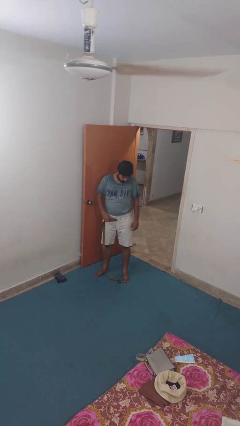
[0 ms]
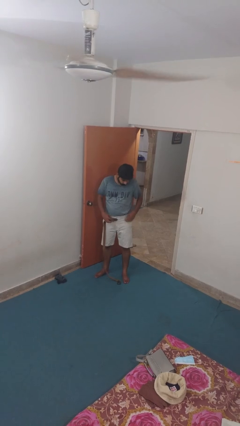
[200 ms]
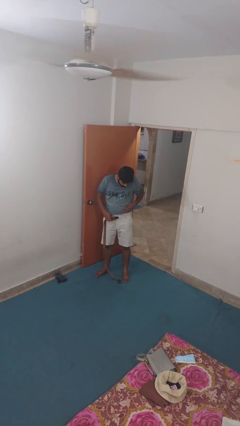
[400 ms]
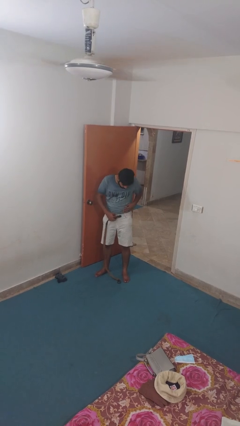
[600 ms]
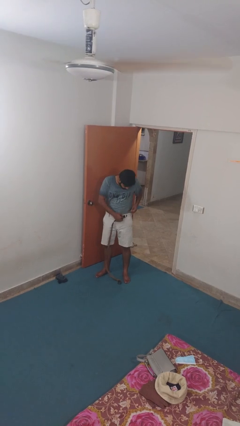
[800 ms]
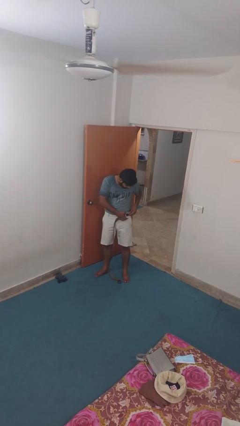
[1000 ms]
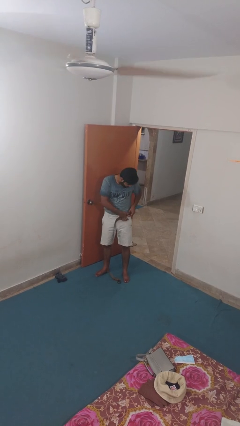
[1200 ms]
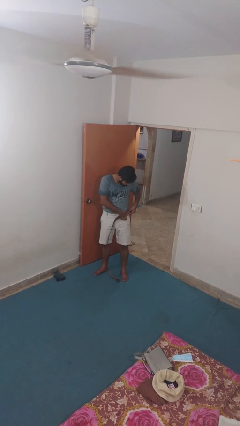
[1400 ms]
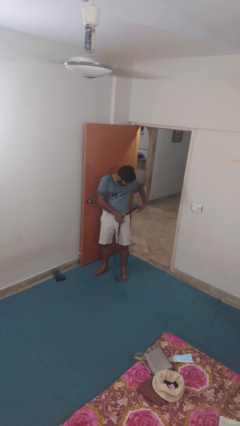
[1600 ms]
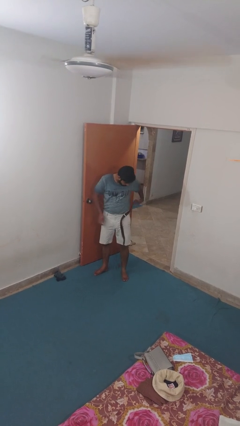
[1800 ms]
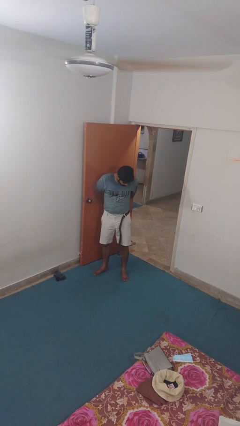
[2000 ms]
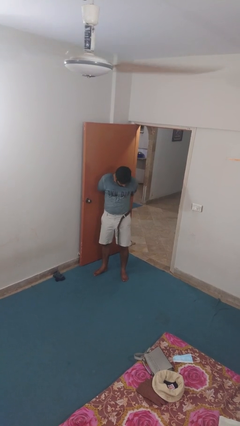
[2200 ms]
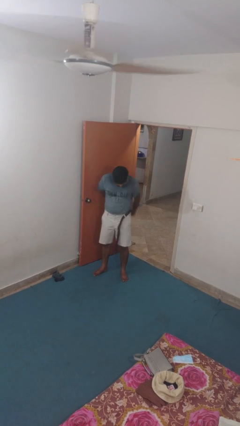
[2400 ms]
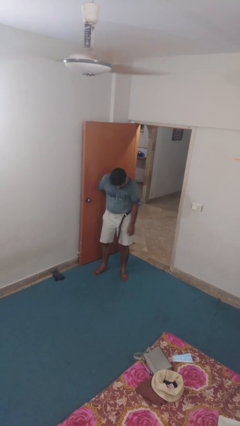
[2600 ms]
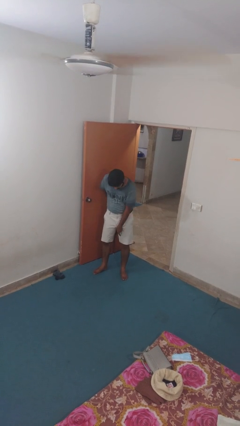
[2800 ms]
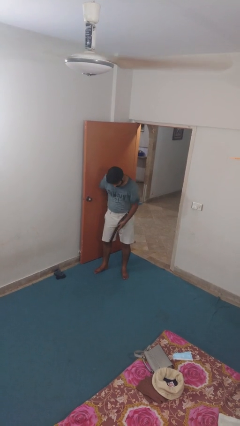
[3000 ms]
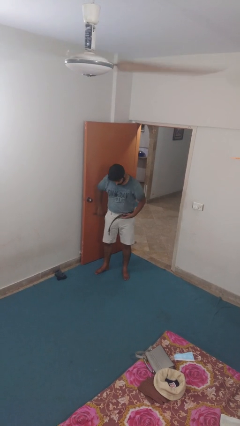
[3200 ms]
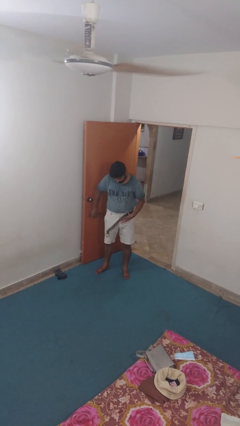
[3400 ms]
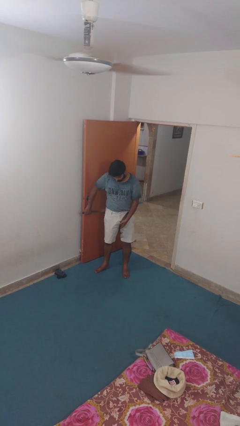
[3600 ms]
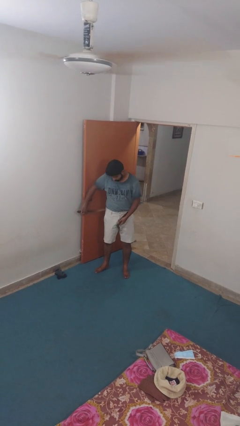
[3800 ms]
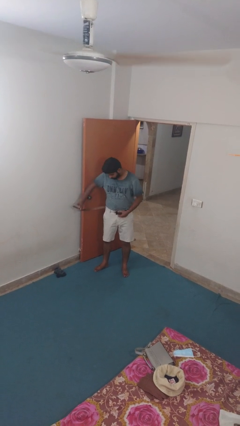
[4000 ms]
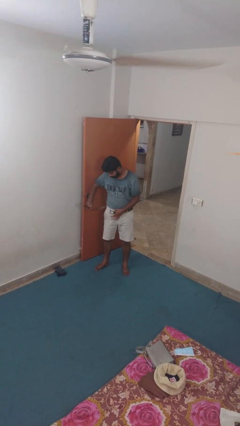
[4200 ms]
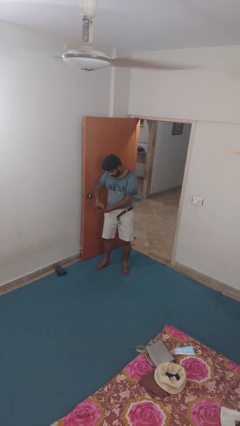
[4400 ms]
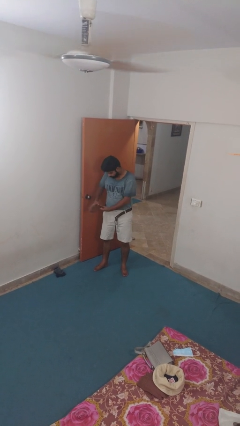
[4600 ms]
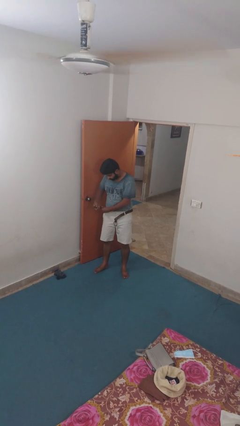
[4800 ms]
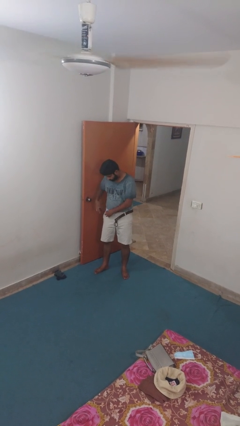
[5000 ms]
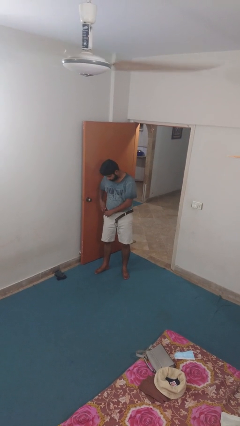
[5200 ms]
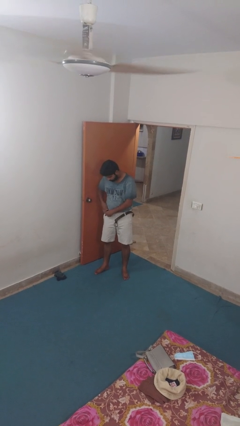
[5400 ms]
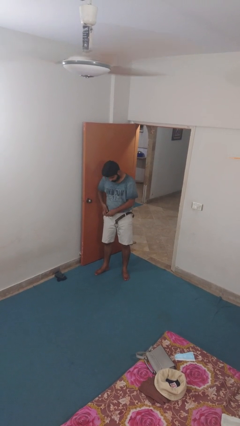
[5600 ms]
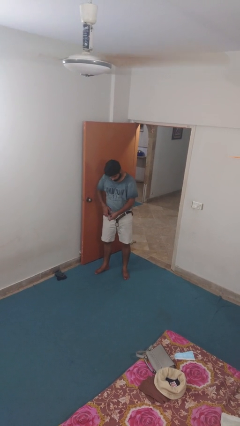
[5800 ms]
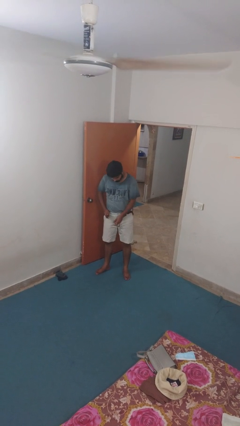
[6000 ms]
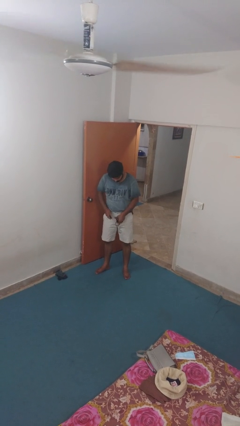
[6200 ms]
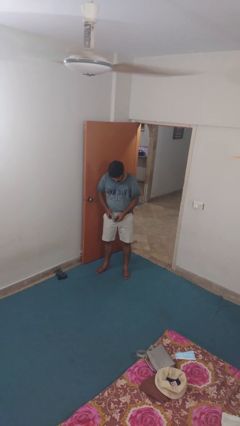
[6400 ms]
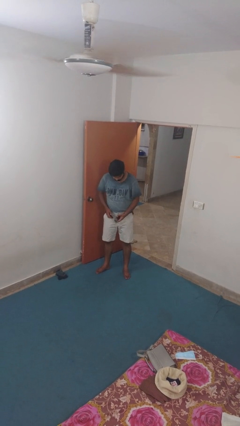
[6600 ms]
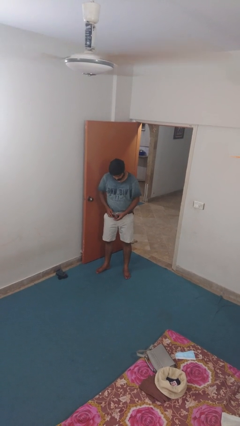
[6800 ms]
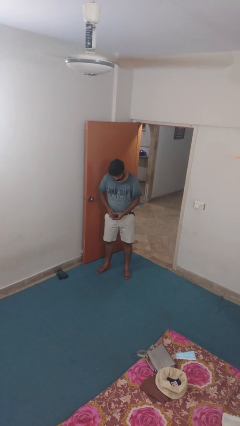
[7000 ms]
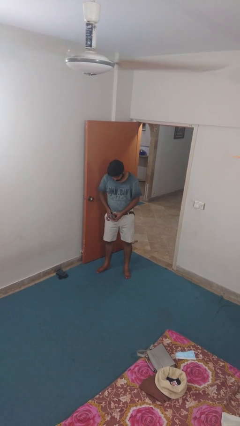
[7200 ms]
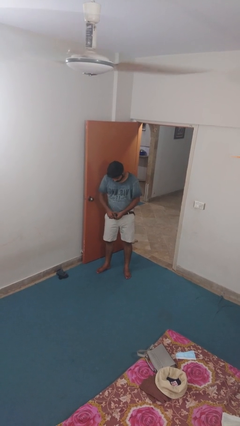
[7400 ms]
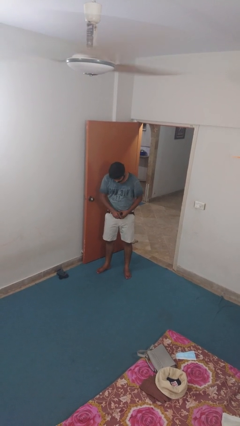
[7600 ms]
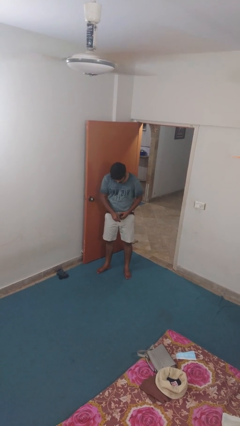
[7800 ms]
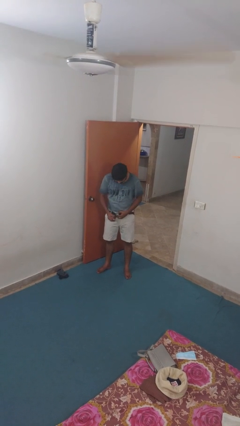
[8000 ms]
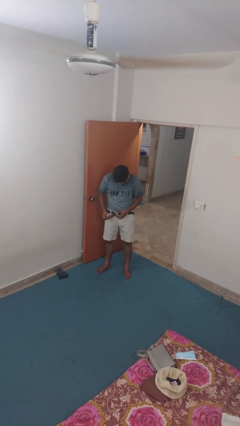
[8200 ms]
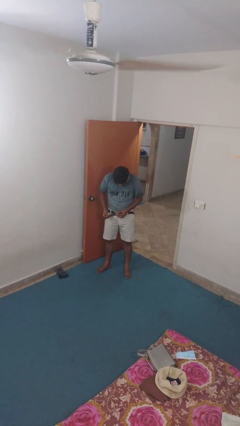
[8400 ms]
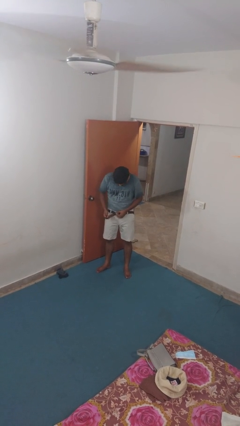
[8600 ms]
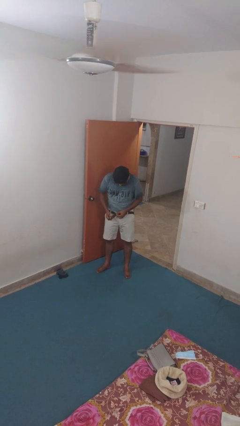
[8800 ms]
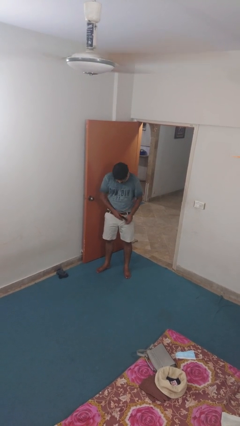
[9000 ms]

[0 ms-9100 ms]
person puts on belt

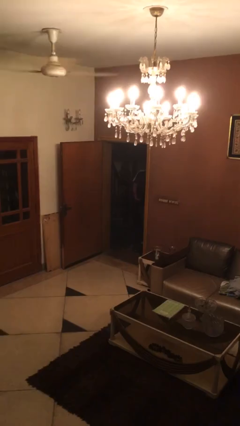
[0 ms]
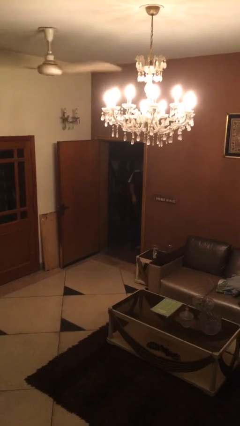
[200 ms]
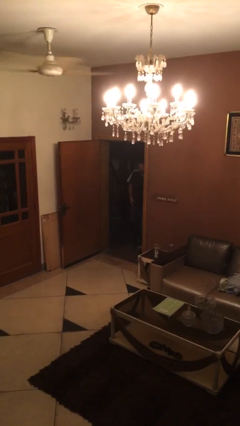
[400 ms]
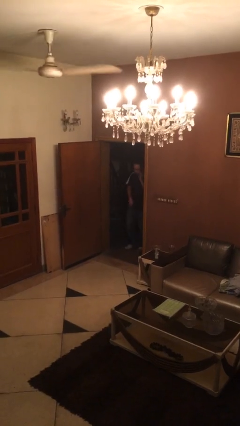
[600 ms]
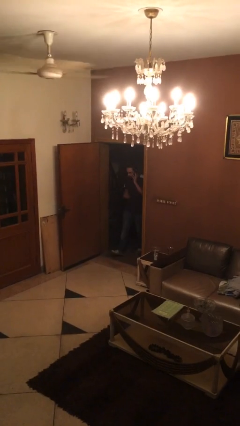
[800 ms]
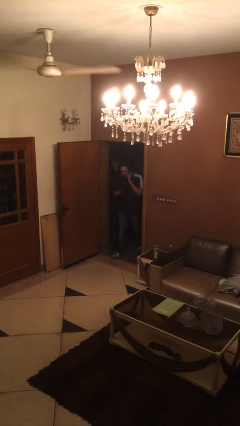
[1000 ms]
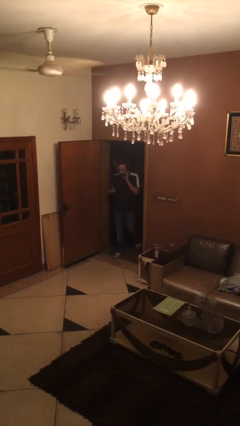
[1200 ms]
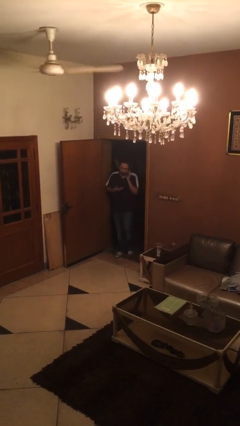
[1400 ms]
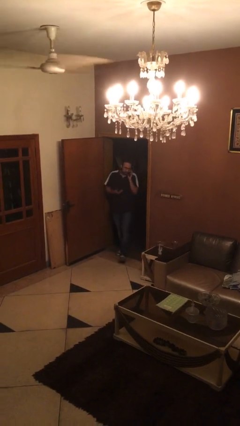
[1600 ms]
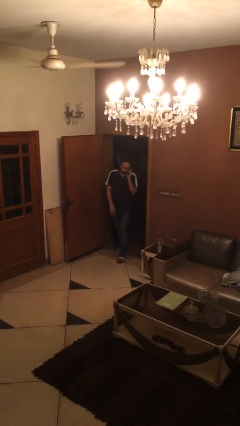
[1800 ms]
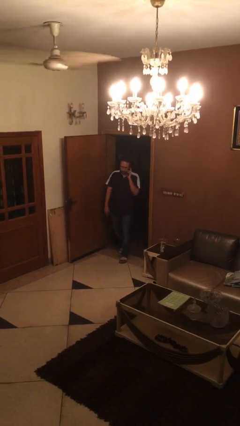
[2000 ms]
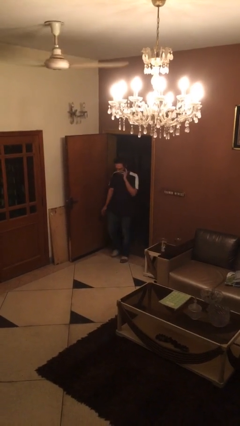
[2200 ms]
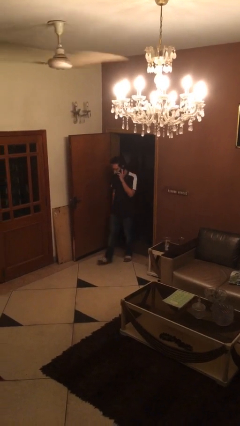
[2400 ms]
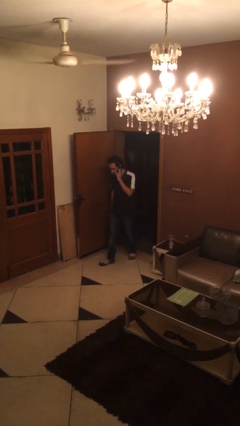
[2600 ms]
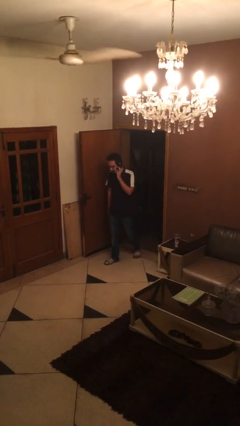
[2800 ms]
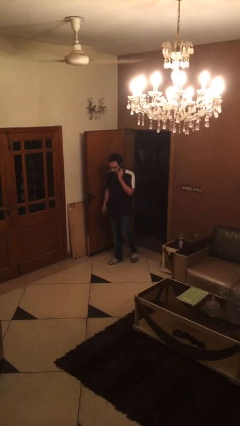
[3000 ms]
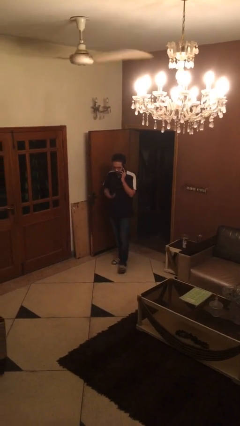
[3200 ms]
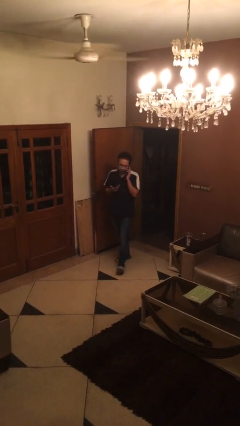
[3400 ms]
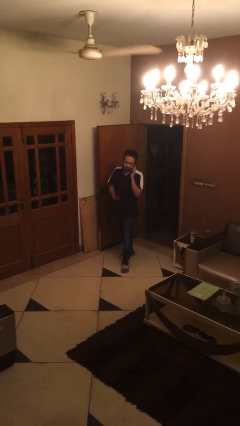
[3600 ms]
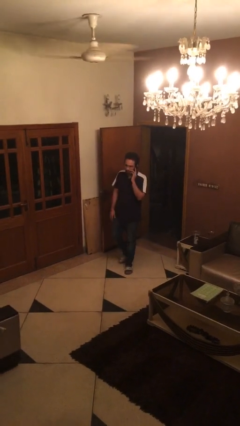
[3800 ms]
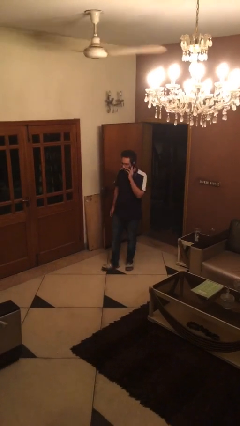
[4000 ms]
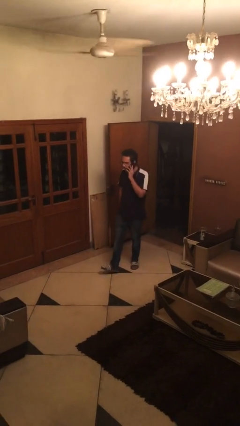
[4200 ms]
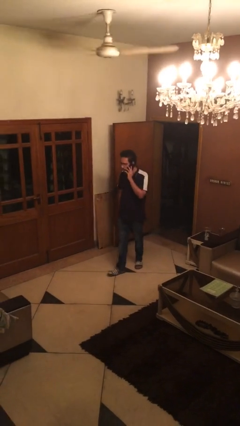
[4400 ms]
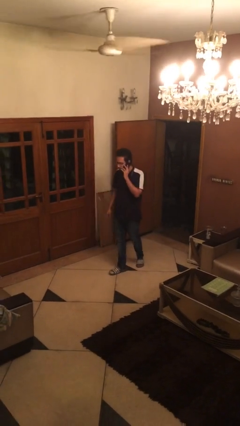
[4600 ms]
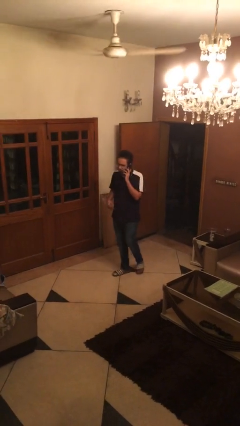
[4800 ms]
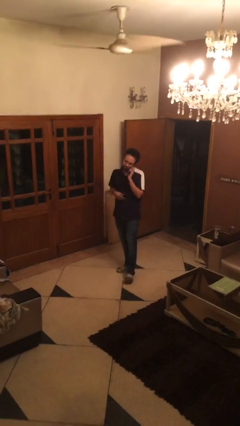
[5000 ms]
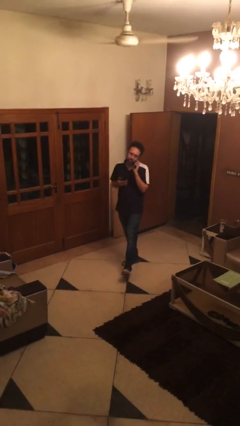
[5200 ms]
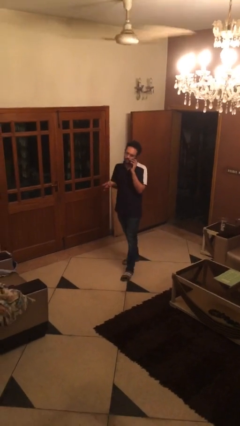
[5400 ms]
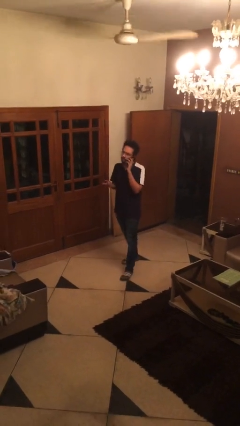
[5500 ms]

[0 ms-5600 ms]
person enters scene through structure

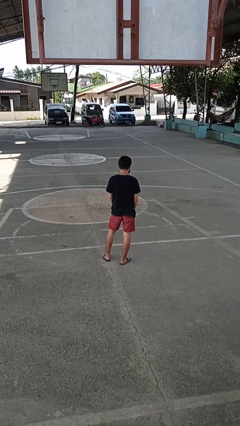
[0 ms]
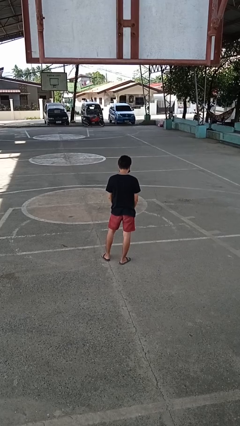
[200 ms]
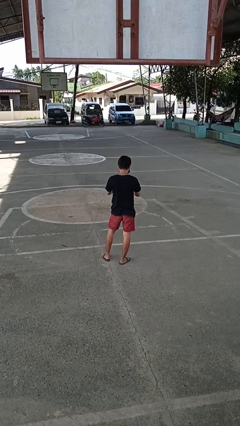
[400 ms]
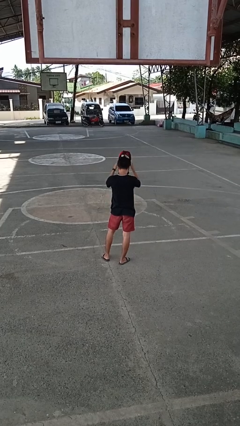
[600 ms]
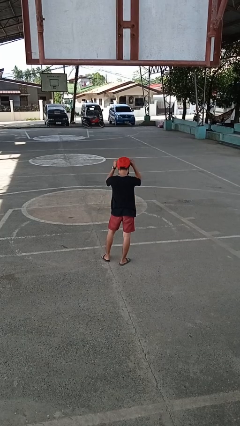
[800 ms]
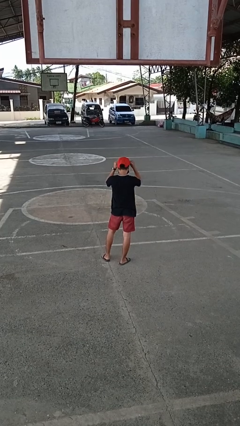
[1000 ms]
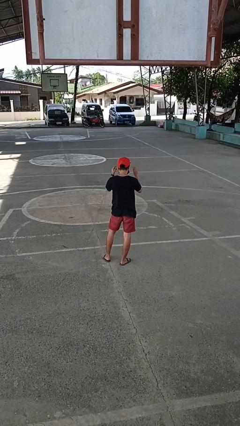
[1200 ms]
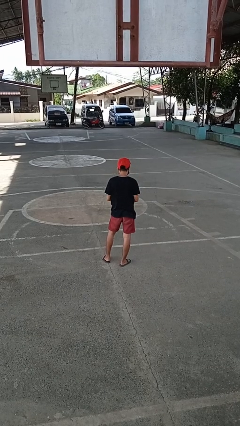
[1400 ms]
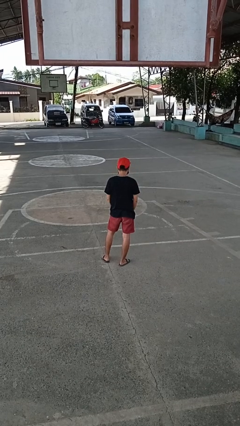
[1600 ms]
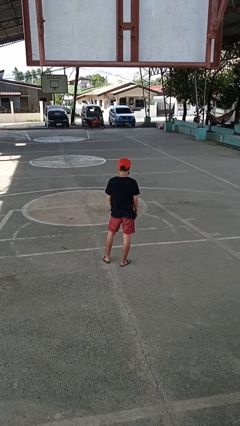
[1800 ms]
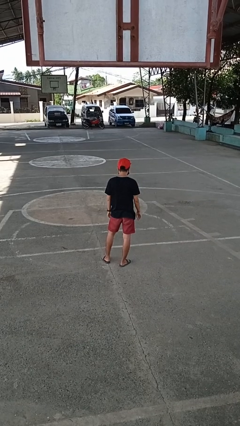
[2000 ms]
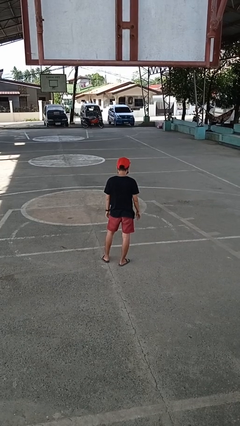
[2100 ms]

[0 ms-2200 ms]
person puts on hat

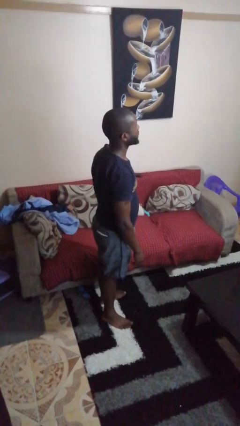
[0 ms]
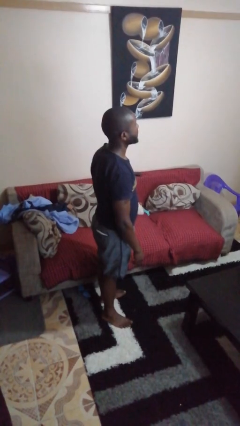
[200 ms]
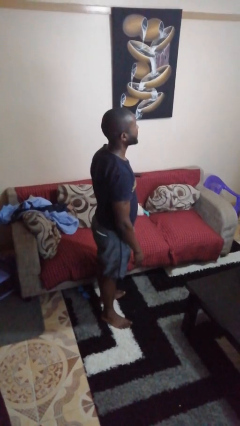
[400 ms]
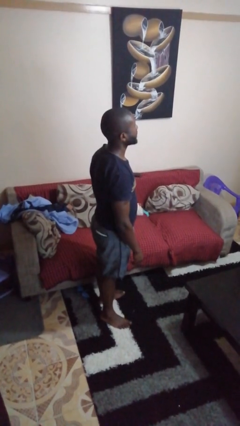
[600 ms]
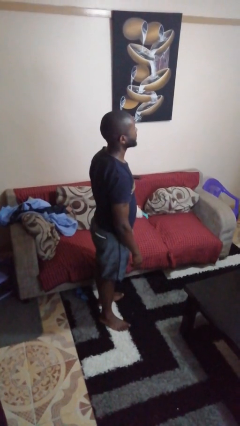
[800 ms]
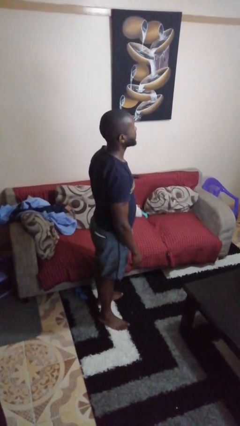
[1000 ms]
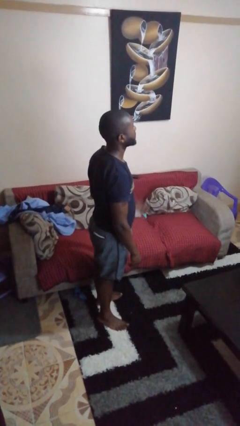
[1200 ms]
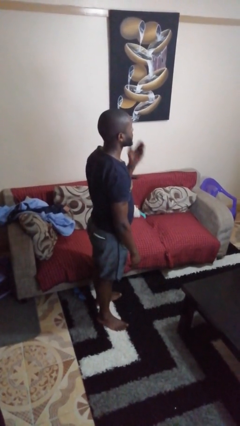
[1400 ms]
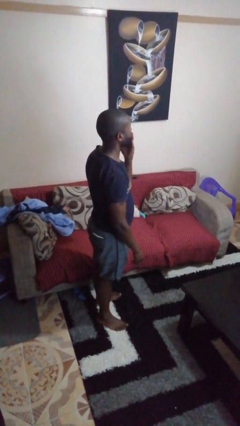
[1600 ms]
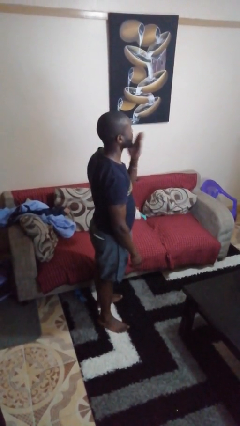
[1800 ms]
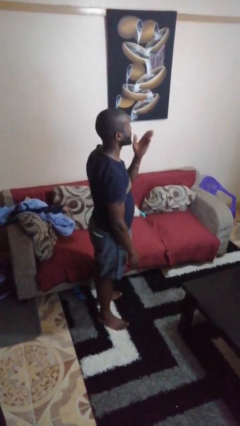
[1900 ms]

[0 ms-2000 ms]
person gestures blow kiss
